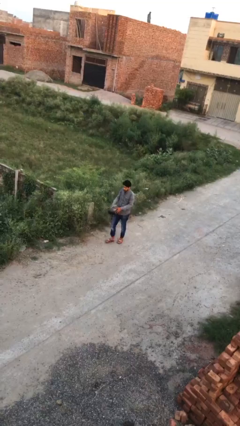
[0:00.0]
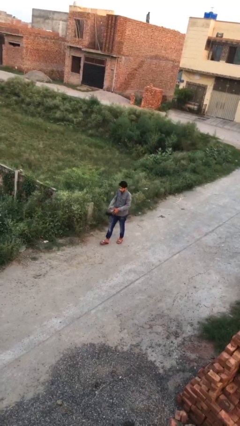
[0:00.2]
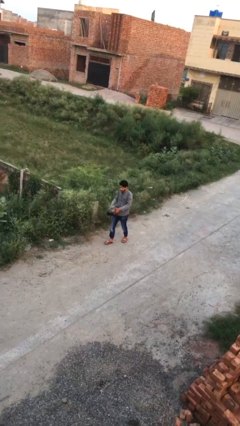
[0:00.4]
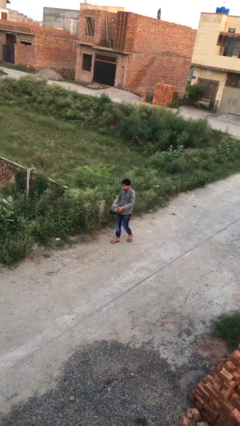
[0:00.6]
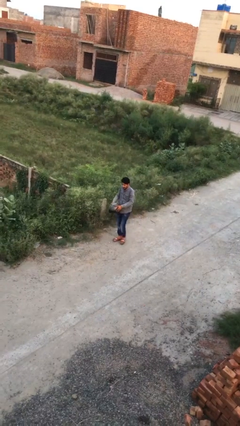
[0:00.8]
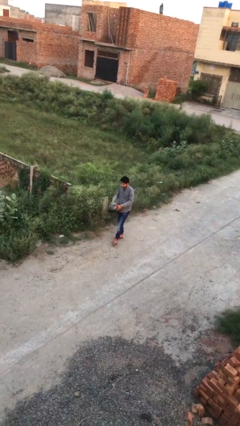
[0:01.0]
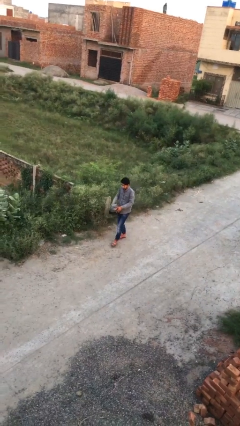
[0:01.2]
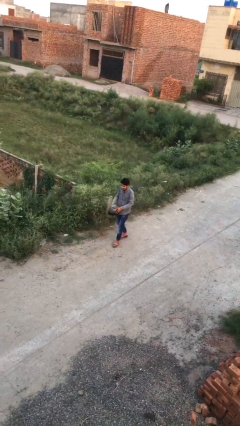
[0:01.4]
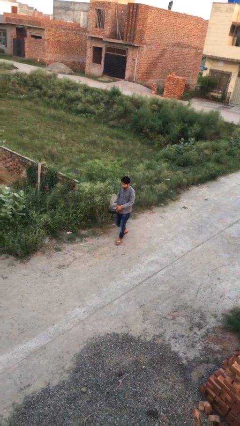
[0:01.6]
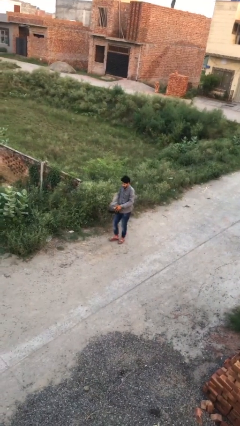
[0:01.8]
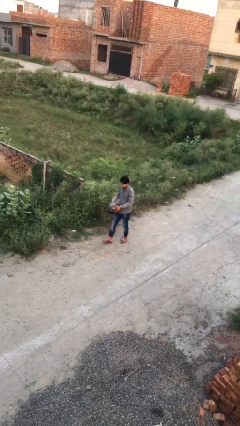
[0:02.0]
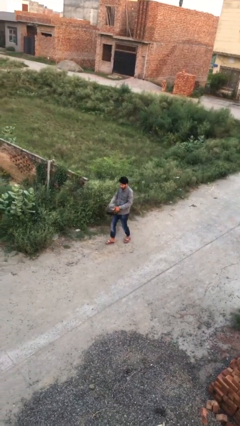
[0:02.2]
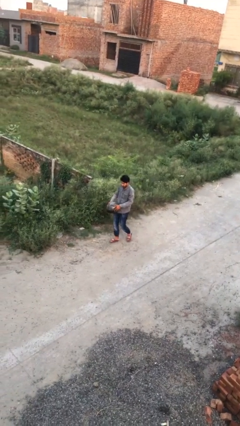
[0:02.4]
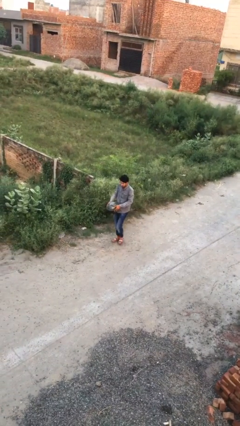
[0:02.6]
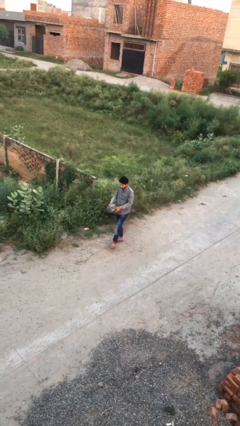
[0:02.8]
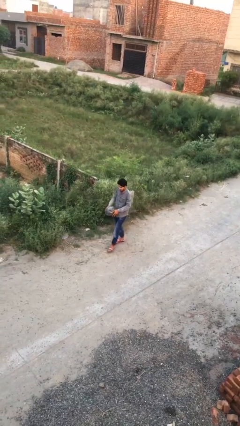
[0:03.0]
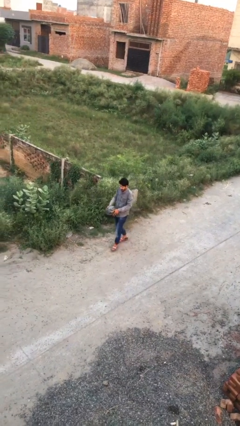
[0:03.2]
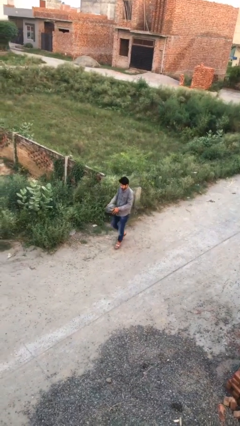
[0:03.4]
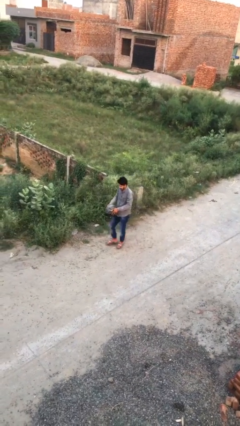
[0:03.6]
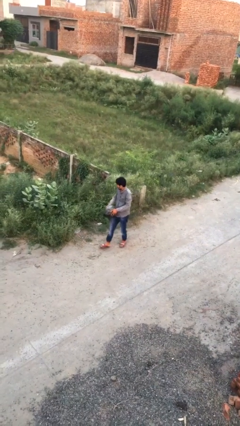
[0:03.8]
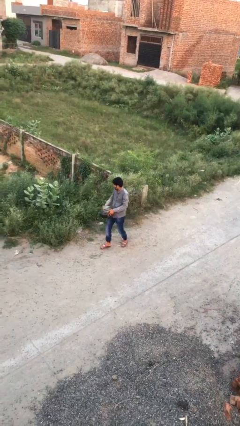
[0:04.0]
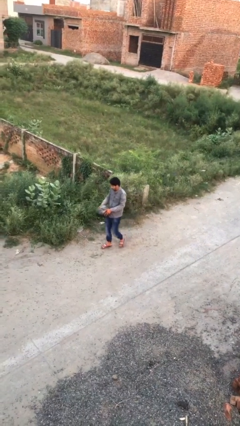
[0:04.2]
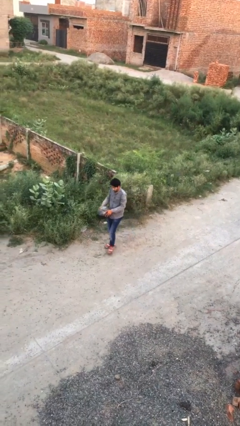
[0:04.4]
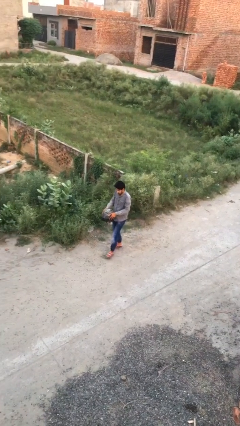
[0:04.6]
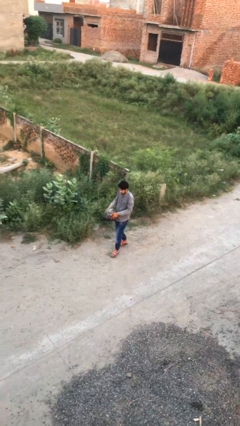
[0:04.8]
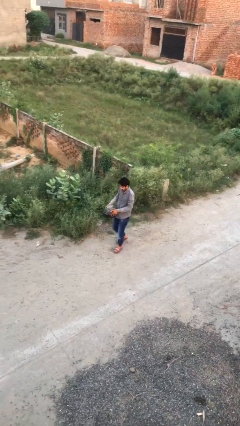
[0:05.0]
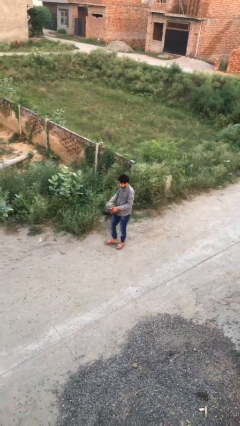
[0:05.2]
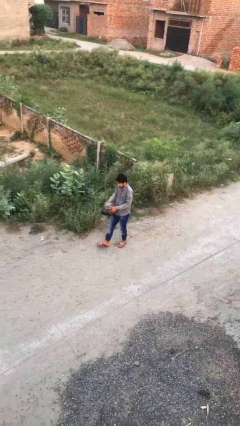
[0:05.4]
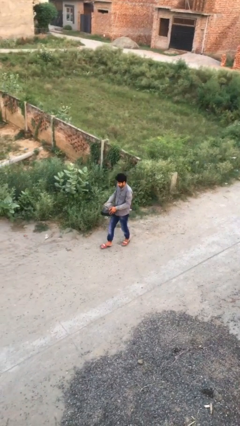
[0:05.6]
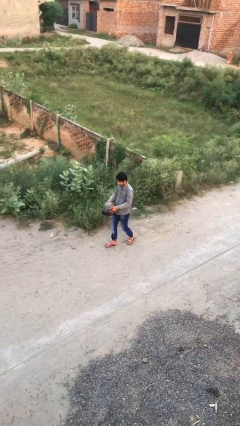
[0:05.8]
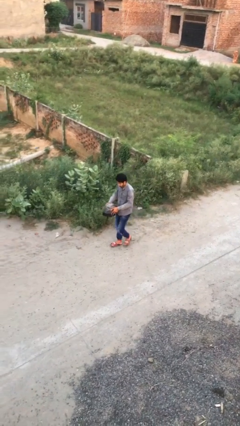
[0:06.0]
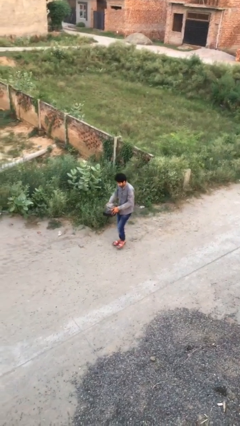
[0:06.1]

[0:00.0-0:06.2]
person carries heavy object

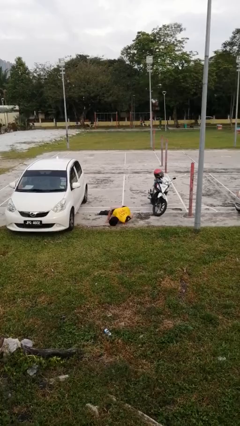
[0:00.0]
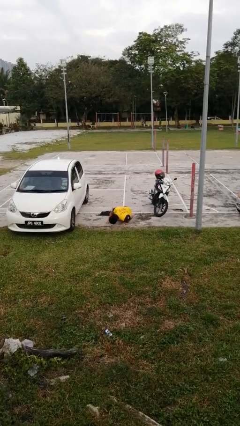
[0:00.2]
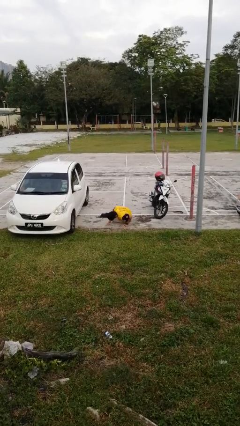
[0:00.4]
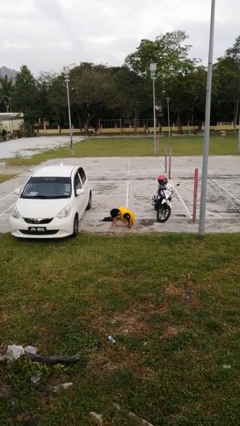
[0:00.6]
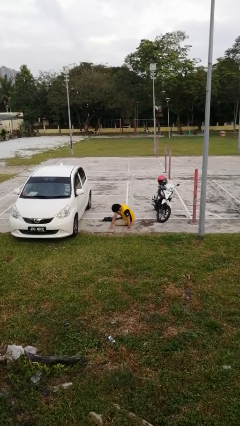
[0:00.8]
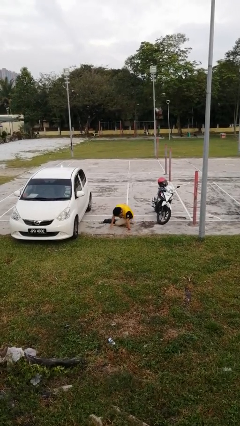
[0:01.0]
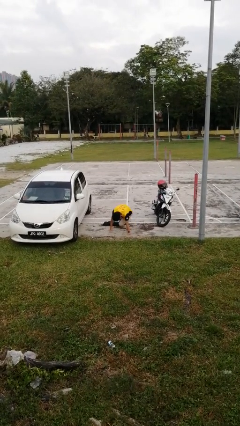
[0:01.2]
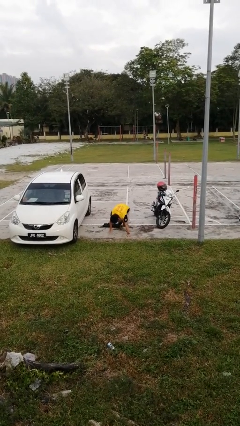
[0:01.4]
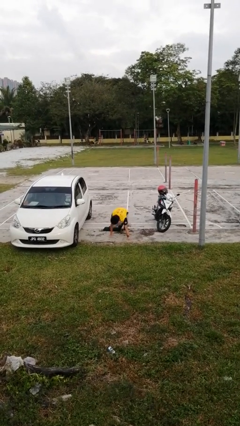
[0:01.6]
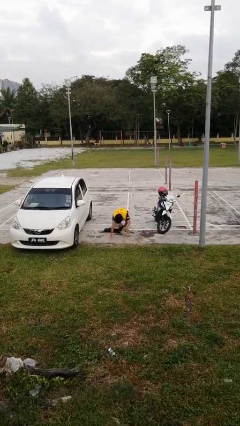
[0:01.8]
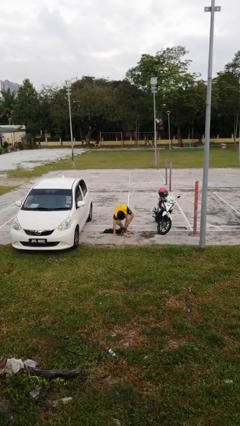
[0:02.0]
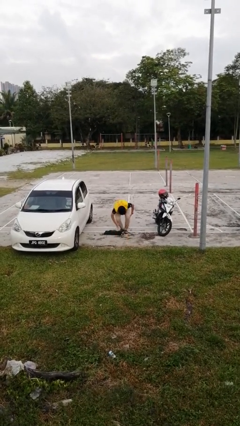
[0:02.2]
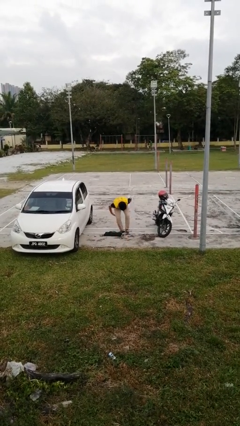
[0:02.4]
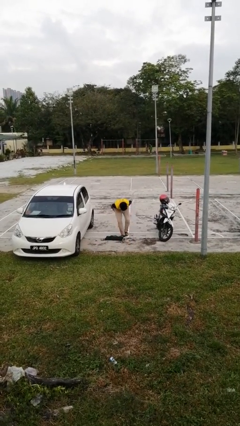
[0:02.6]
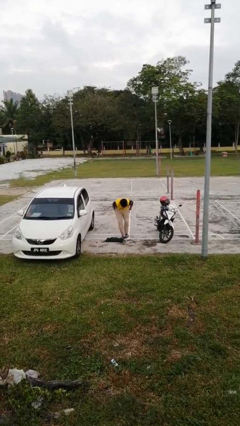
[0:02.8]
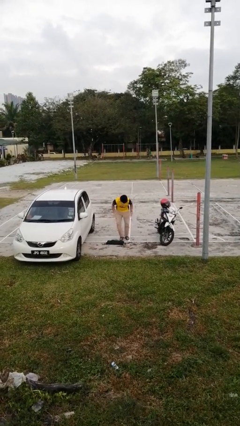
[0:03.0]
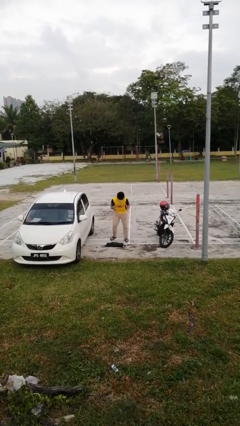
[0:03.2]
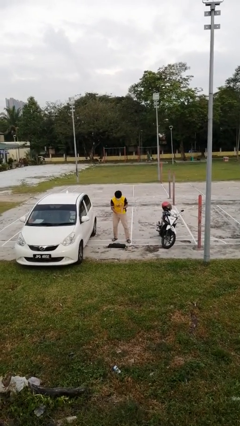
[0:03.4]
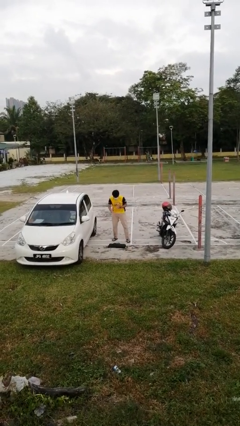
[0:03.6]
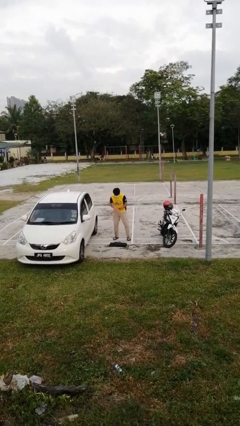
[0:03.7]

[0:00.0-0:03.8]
person stands up from floor

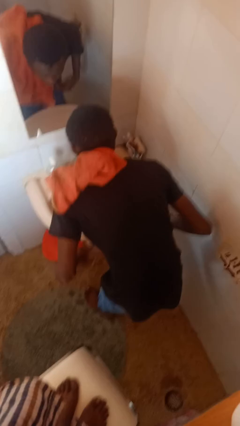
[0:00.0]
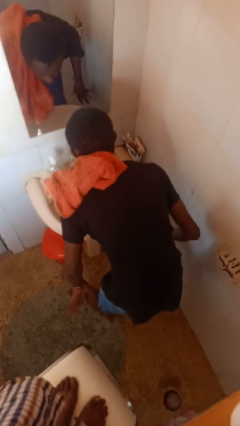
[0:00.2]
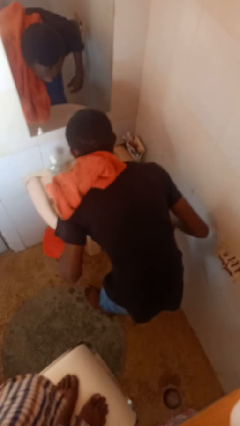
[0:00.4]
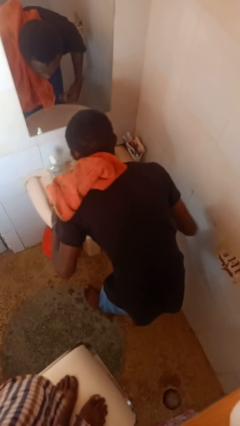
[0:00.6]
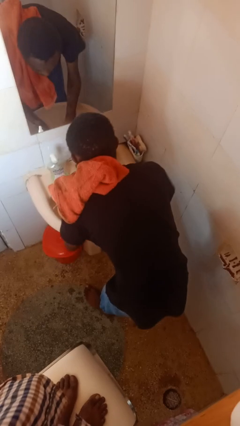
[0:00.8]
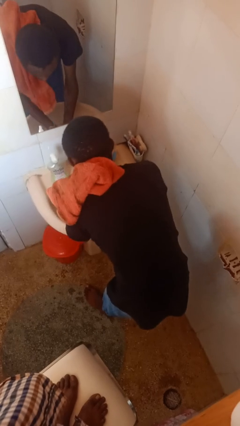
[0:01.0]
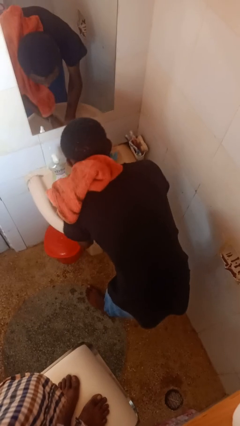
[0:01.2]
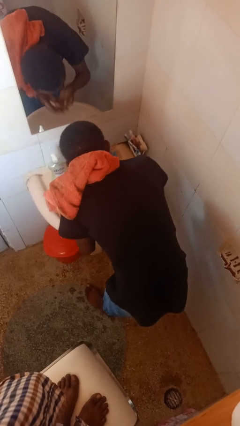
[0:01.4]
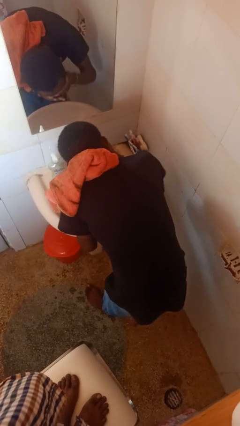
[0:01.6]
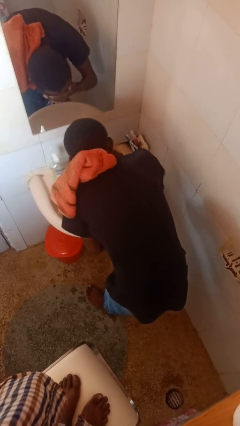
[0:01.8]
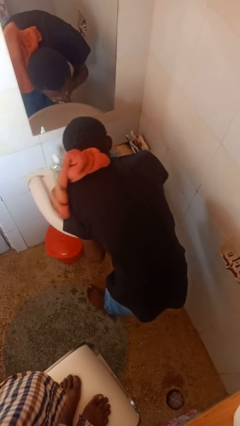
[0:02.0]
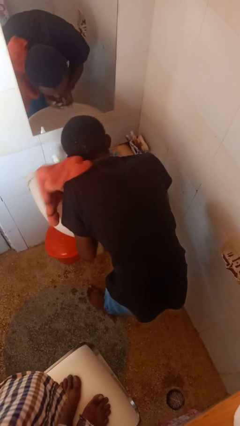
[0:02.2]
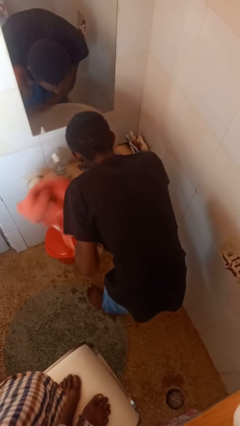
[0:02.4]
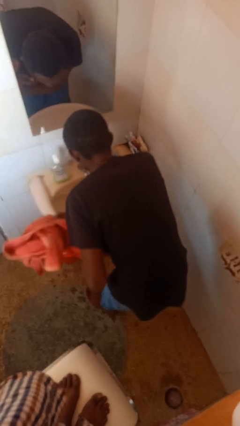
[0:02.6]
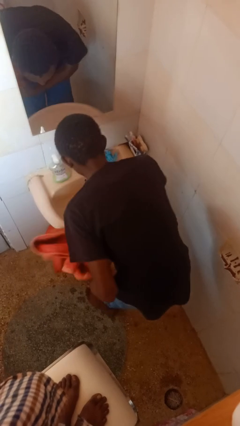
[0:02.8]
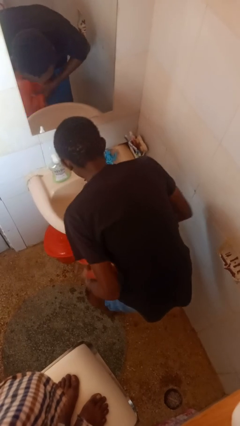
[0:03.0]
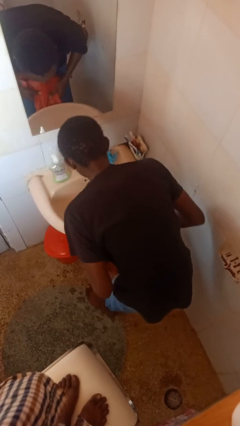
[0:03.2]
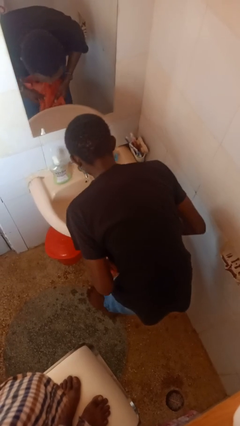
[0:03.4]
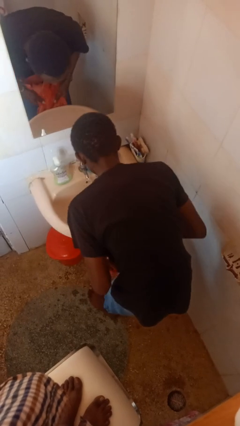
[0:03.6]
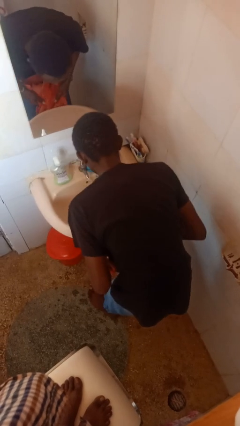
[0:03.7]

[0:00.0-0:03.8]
person washes face

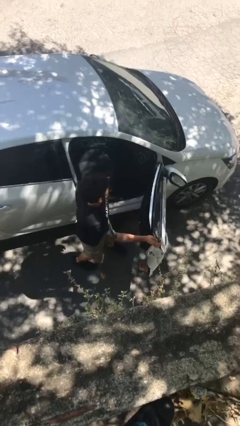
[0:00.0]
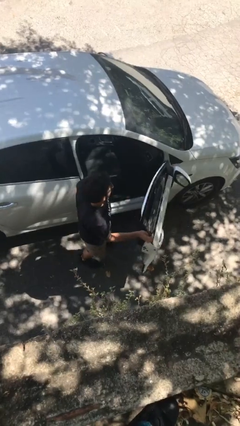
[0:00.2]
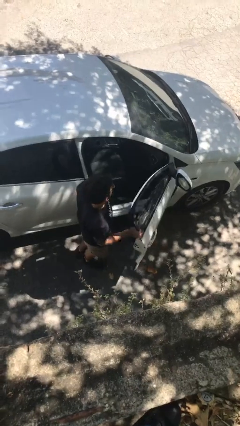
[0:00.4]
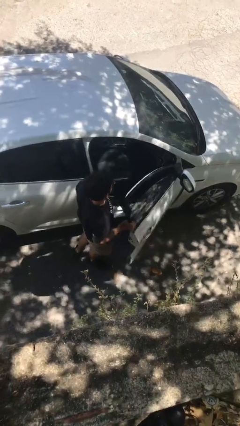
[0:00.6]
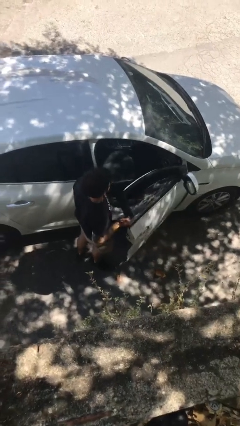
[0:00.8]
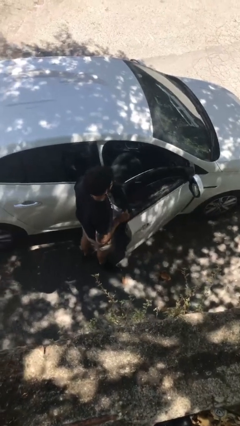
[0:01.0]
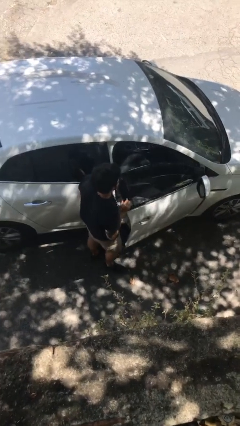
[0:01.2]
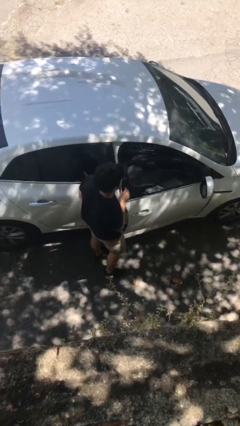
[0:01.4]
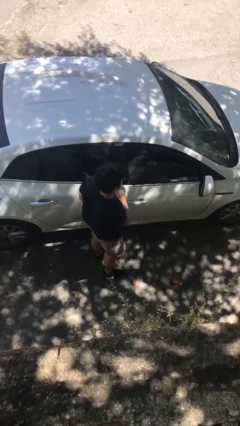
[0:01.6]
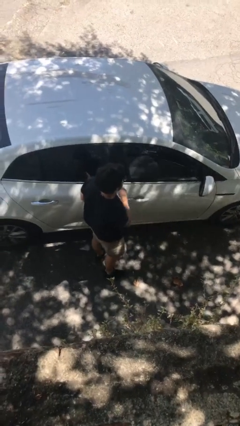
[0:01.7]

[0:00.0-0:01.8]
person closes car door

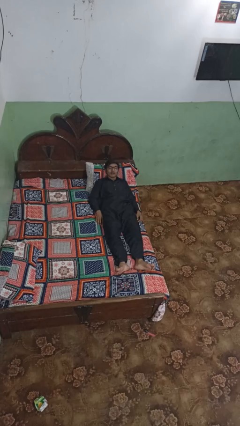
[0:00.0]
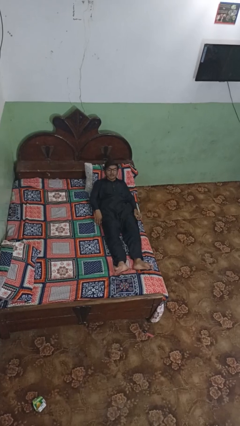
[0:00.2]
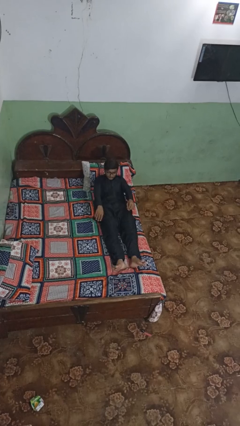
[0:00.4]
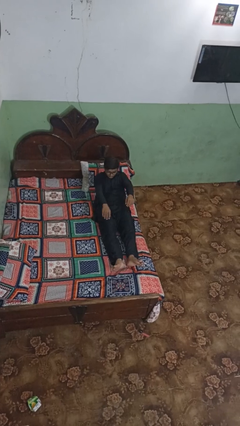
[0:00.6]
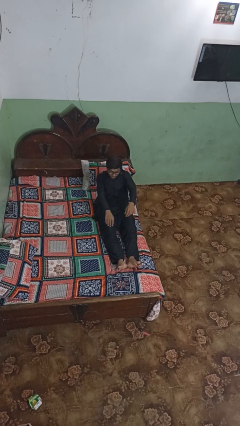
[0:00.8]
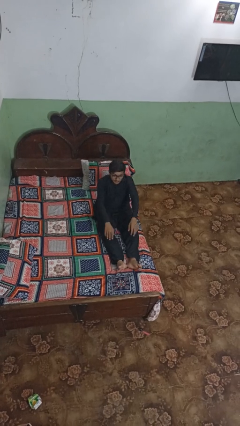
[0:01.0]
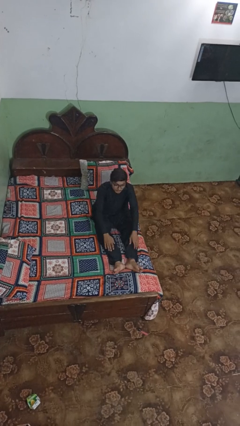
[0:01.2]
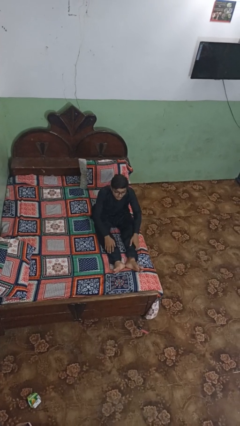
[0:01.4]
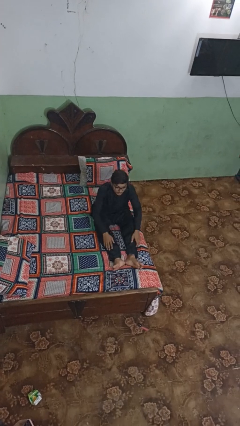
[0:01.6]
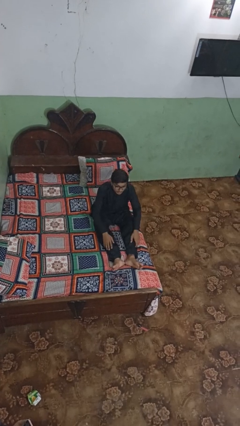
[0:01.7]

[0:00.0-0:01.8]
person stands up
